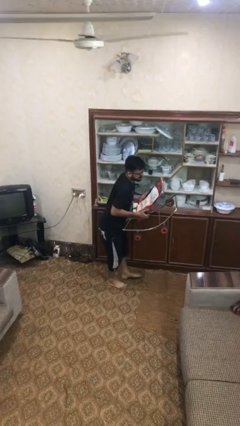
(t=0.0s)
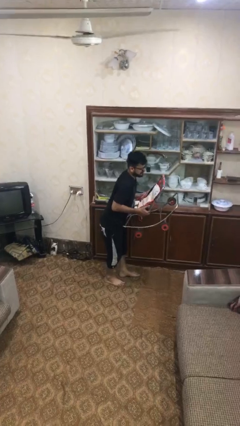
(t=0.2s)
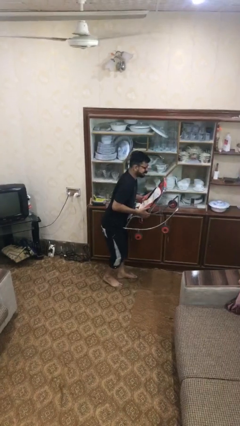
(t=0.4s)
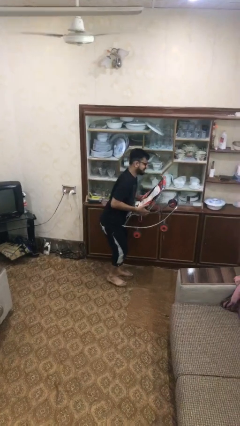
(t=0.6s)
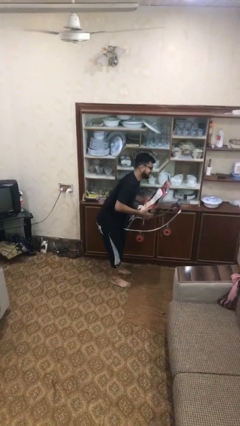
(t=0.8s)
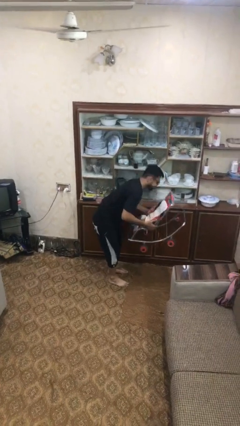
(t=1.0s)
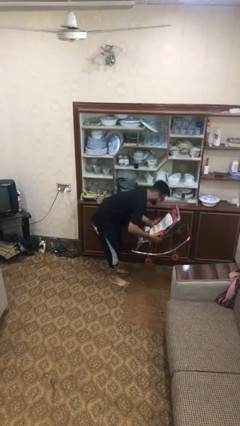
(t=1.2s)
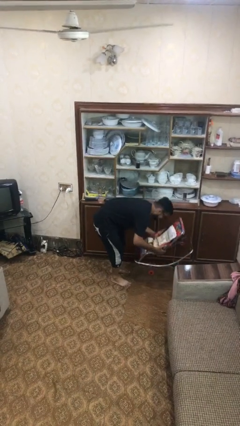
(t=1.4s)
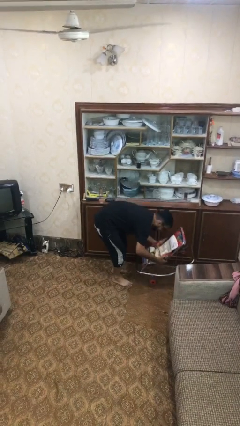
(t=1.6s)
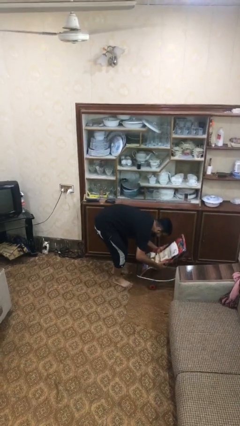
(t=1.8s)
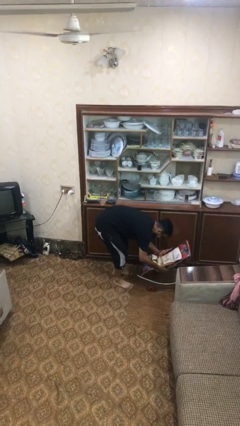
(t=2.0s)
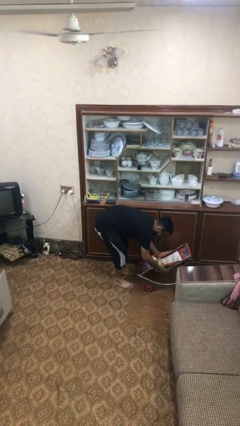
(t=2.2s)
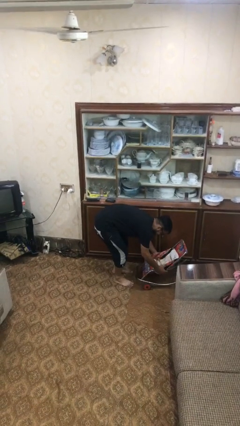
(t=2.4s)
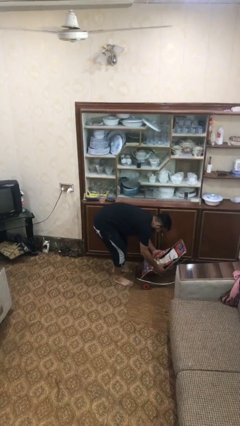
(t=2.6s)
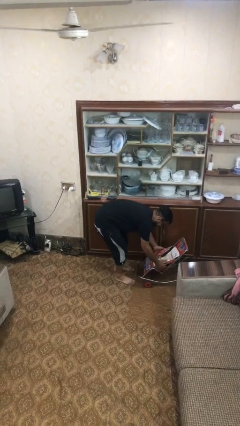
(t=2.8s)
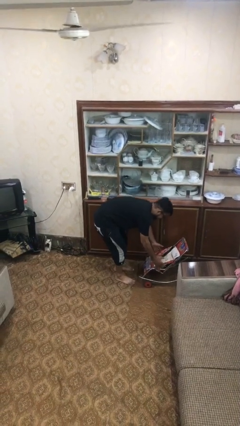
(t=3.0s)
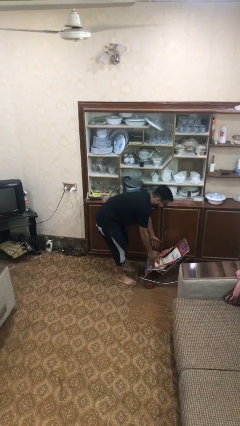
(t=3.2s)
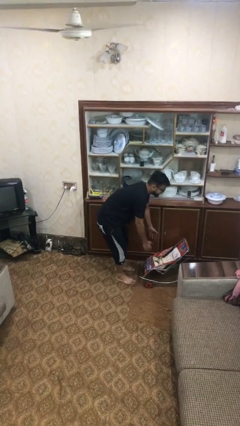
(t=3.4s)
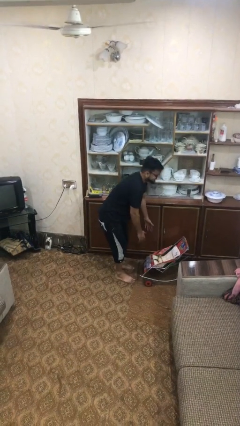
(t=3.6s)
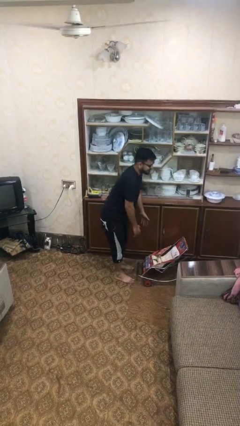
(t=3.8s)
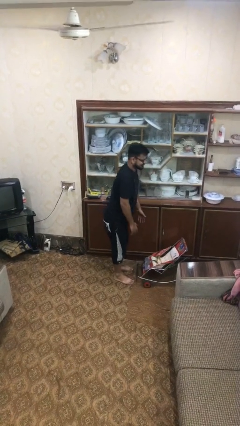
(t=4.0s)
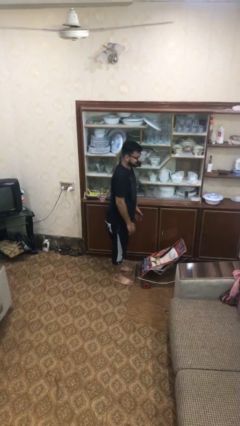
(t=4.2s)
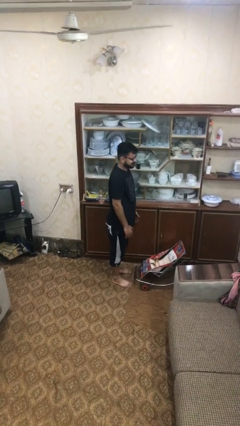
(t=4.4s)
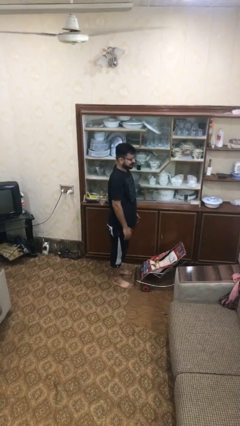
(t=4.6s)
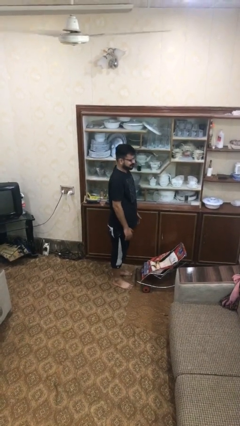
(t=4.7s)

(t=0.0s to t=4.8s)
person puts down object on floor

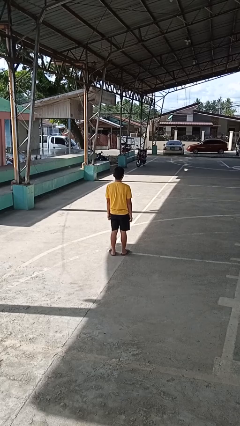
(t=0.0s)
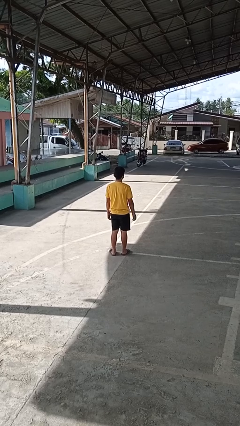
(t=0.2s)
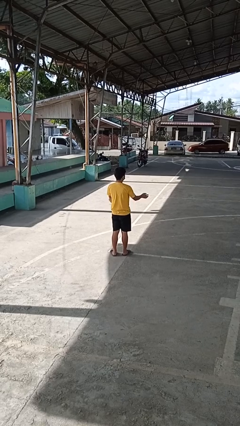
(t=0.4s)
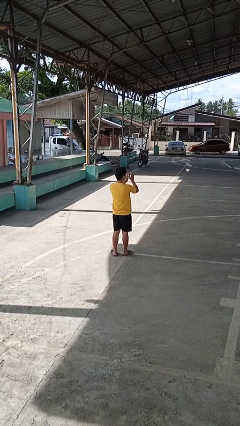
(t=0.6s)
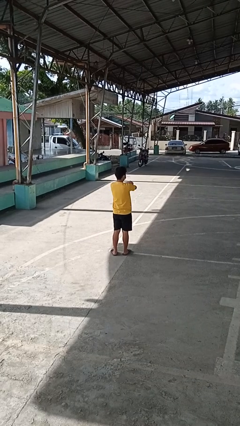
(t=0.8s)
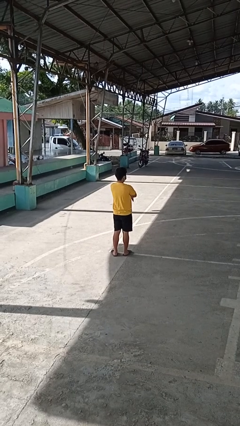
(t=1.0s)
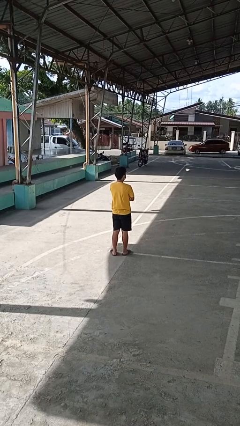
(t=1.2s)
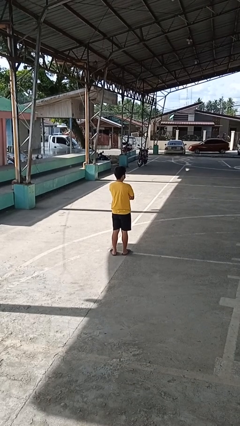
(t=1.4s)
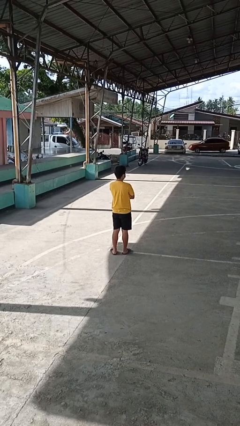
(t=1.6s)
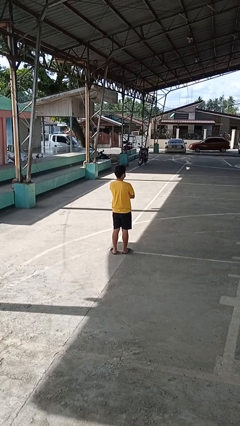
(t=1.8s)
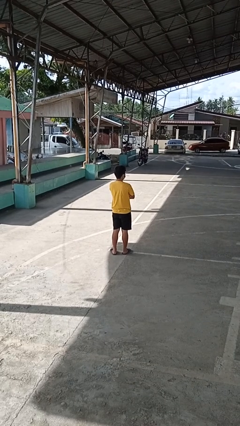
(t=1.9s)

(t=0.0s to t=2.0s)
person crosses arms

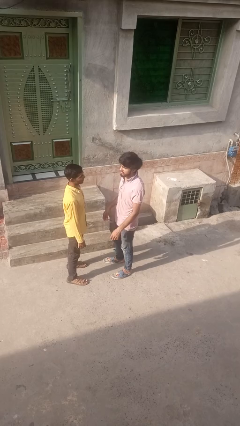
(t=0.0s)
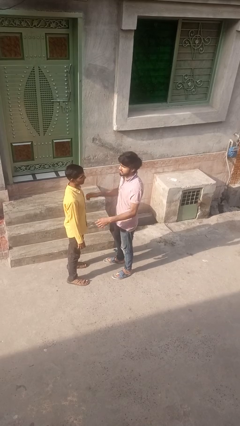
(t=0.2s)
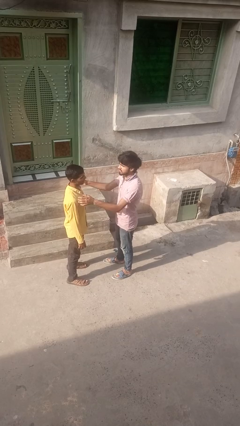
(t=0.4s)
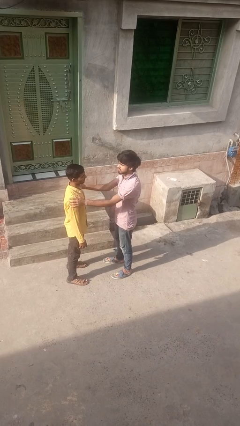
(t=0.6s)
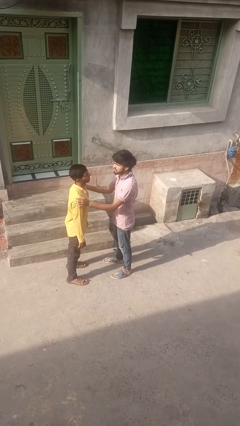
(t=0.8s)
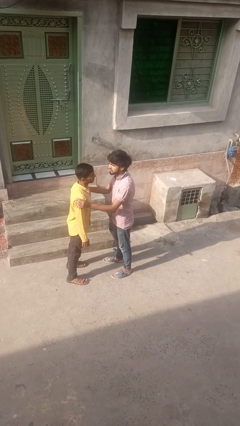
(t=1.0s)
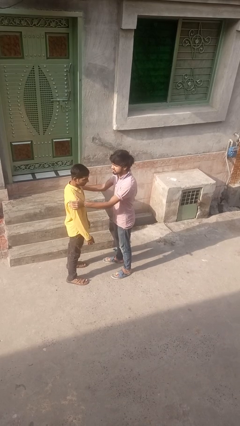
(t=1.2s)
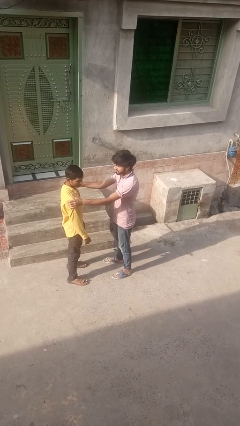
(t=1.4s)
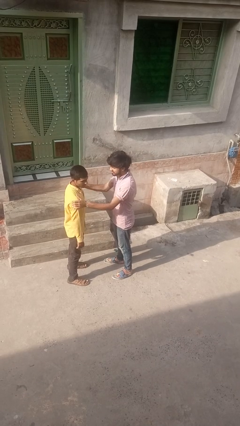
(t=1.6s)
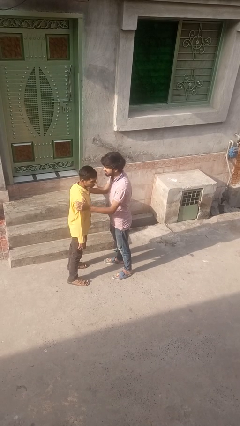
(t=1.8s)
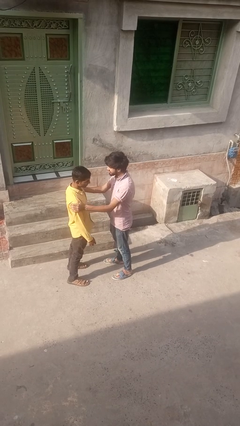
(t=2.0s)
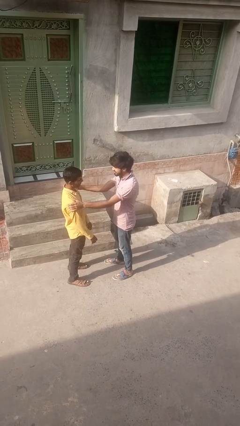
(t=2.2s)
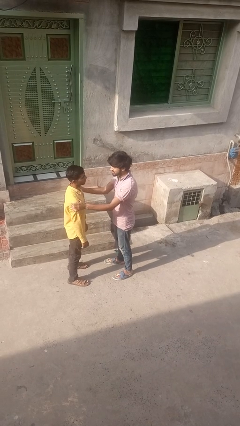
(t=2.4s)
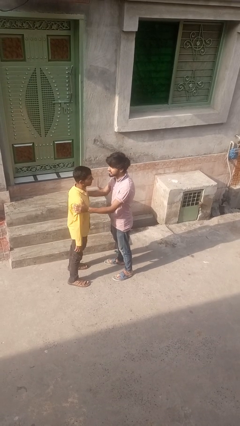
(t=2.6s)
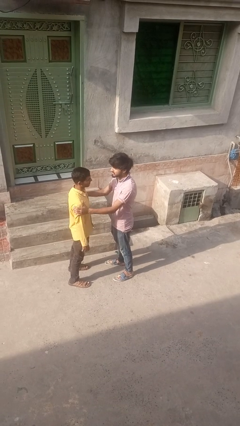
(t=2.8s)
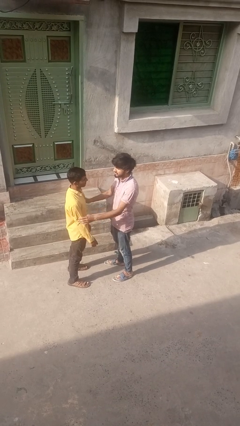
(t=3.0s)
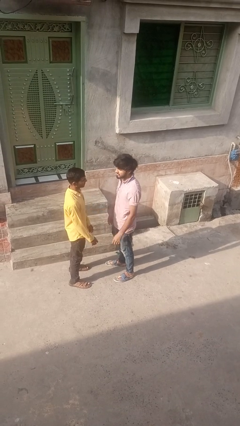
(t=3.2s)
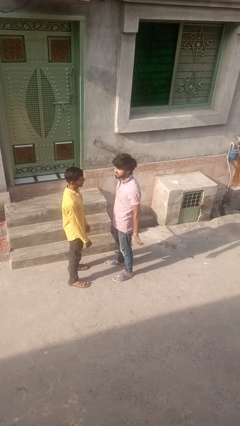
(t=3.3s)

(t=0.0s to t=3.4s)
person grabs person by bicep

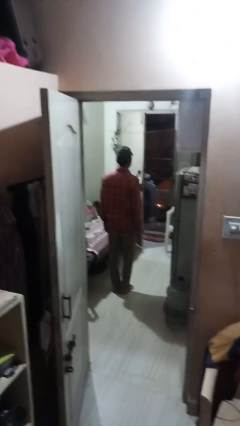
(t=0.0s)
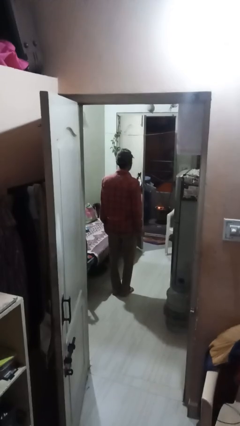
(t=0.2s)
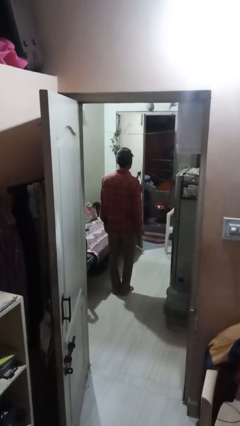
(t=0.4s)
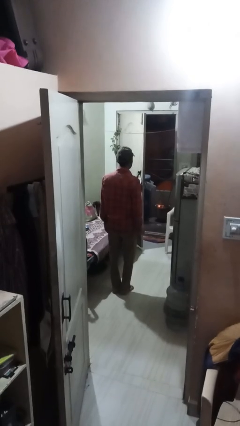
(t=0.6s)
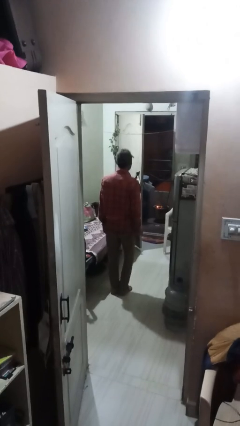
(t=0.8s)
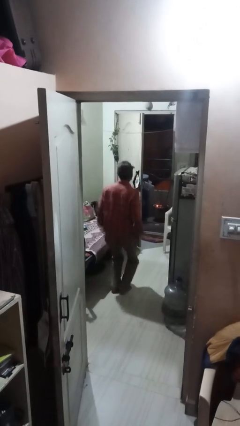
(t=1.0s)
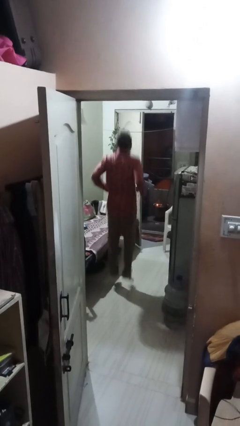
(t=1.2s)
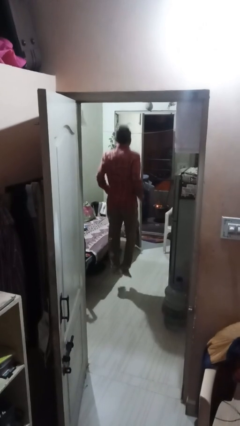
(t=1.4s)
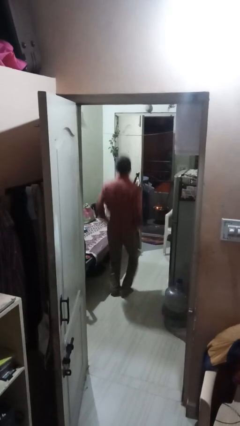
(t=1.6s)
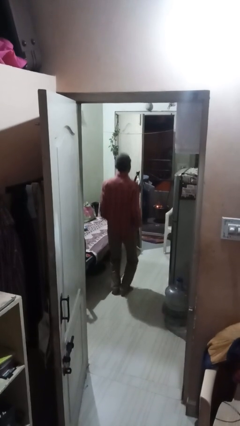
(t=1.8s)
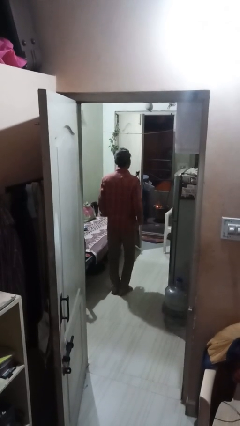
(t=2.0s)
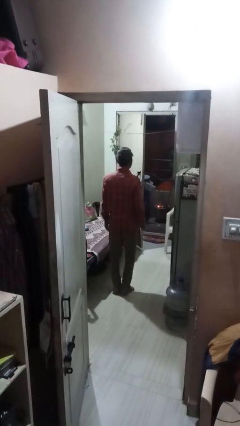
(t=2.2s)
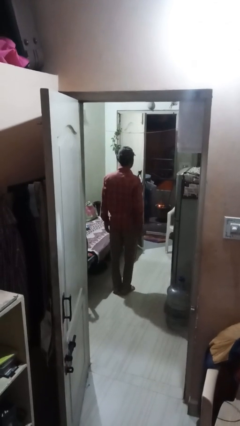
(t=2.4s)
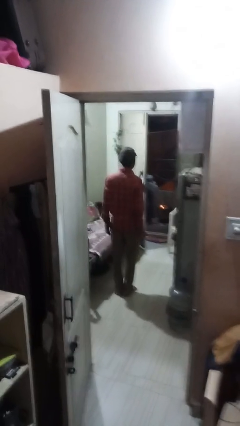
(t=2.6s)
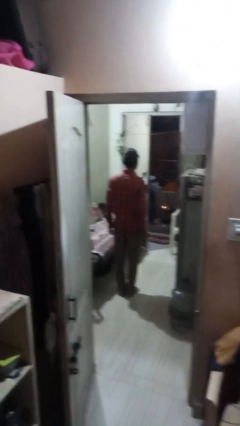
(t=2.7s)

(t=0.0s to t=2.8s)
person jumps

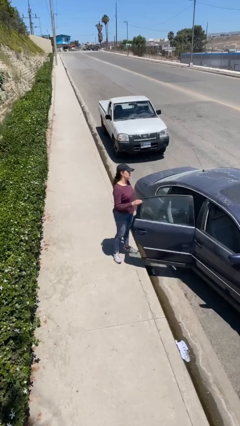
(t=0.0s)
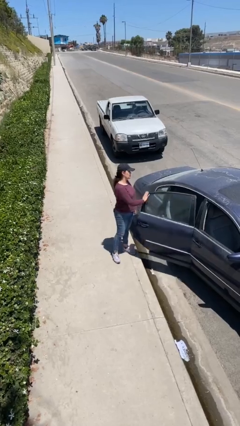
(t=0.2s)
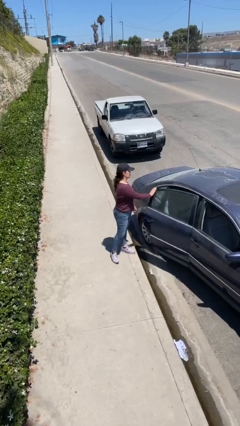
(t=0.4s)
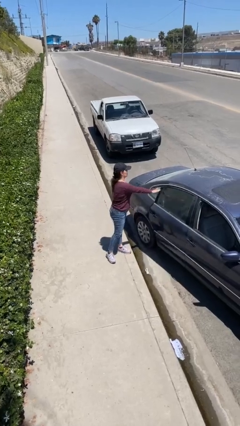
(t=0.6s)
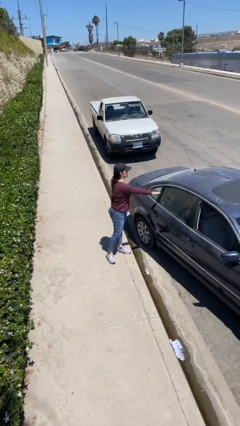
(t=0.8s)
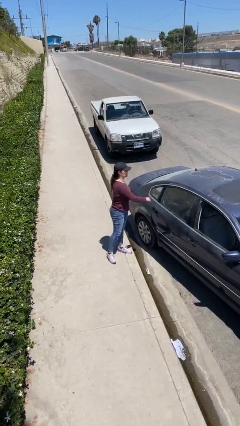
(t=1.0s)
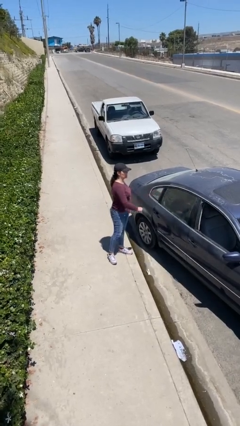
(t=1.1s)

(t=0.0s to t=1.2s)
person closes car door

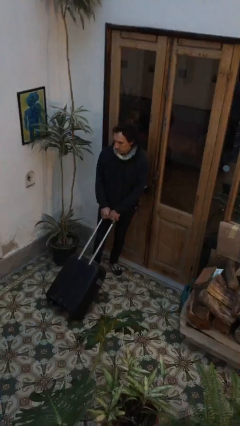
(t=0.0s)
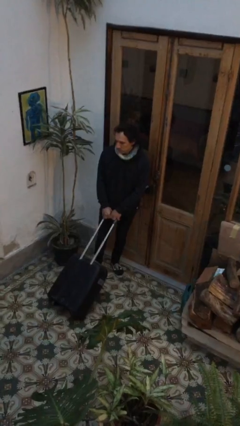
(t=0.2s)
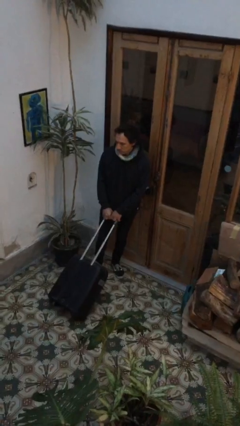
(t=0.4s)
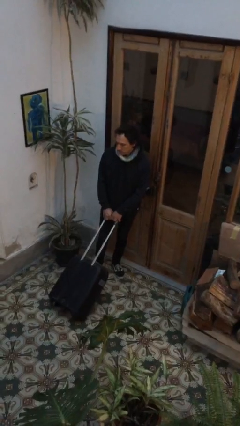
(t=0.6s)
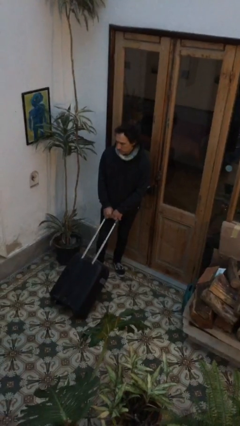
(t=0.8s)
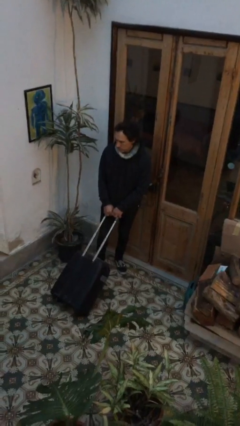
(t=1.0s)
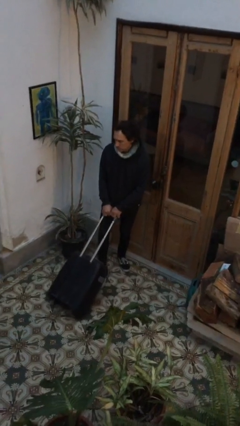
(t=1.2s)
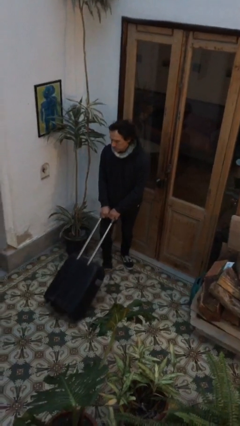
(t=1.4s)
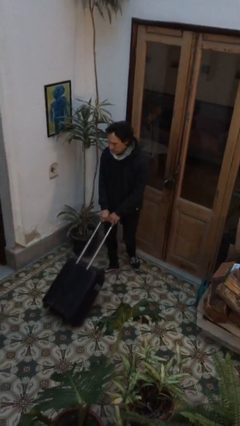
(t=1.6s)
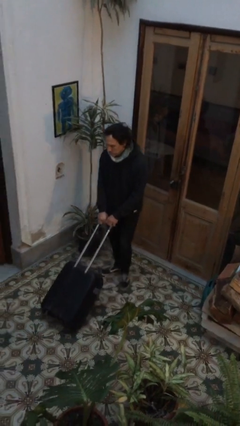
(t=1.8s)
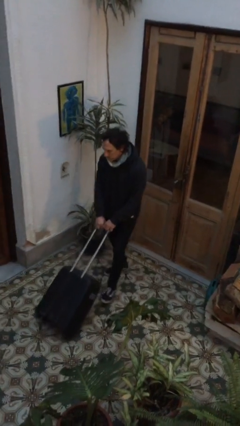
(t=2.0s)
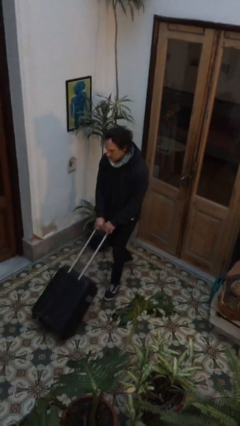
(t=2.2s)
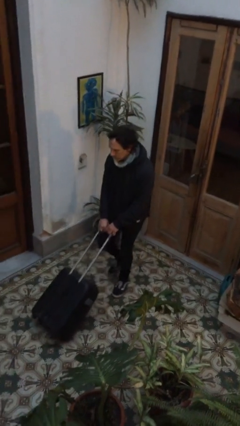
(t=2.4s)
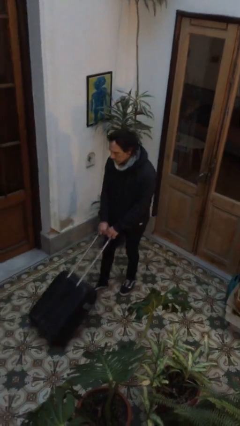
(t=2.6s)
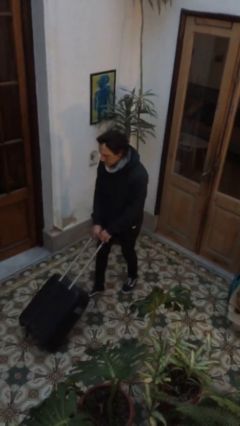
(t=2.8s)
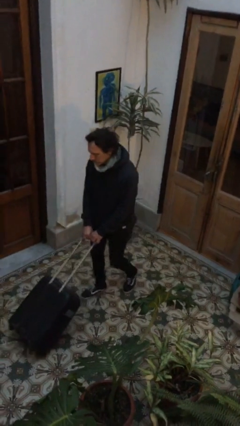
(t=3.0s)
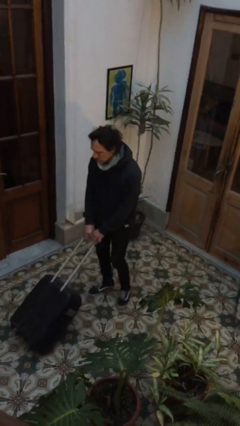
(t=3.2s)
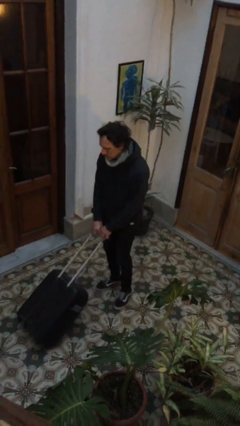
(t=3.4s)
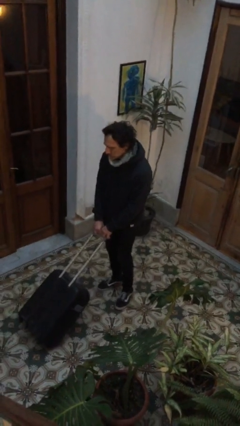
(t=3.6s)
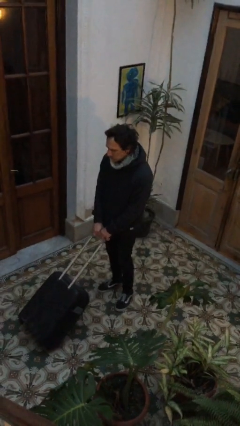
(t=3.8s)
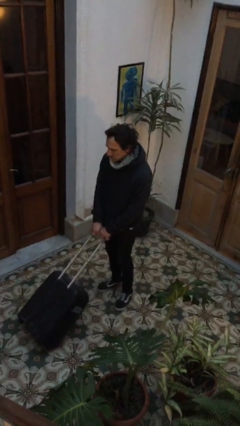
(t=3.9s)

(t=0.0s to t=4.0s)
person pushes wheeled cart
